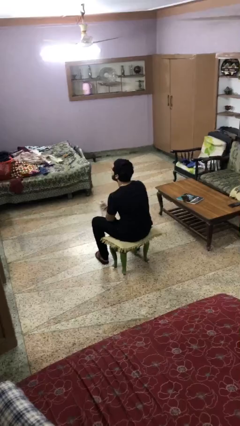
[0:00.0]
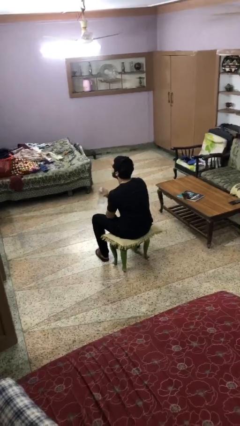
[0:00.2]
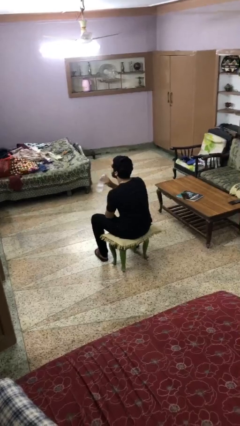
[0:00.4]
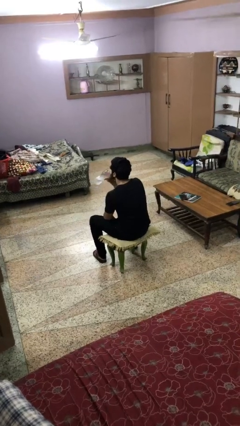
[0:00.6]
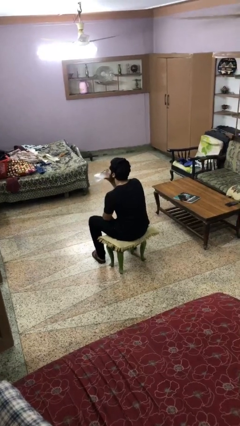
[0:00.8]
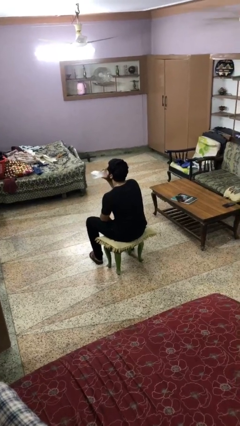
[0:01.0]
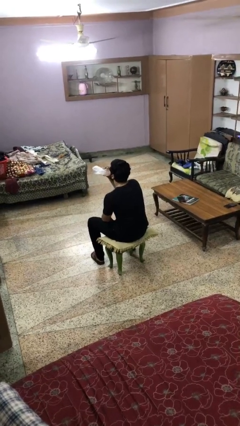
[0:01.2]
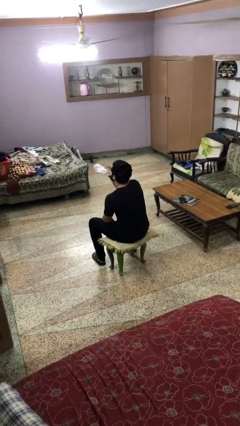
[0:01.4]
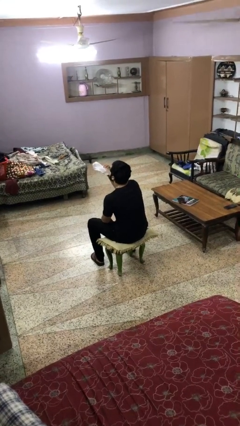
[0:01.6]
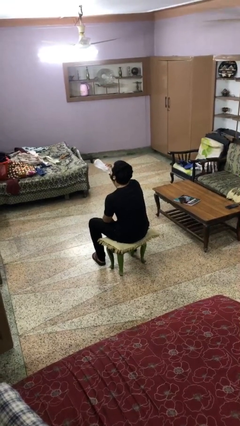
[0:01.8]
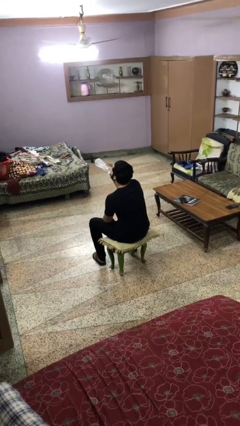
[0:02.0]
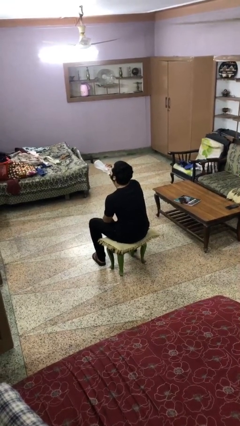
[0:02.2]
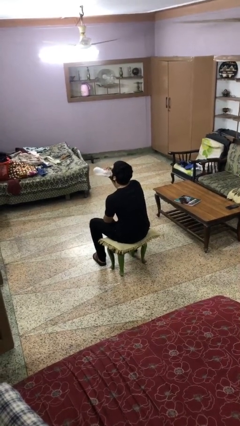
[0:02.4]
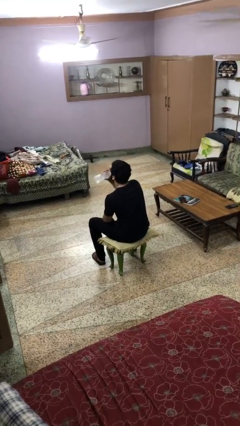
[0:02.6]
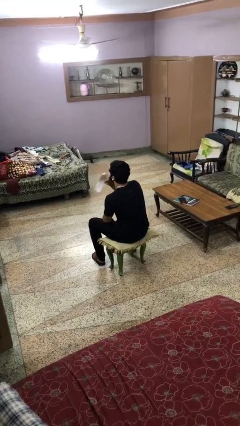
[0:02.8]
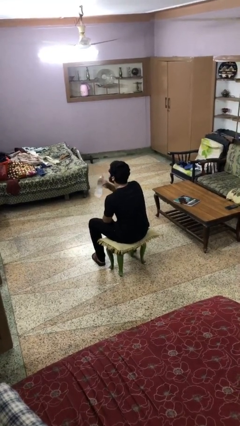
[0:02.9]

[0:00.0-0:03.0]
person drinks from bottle

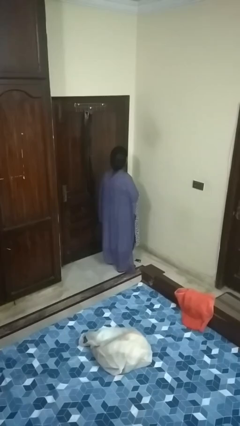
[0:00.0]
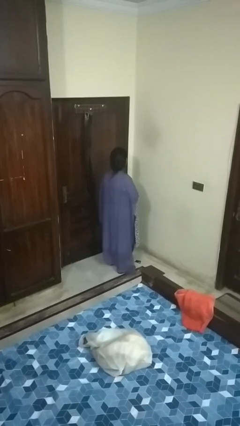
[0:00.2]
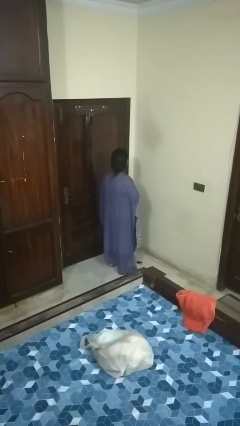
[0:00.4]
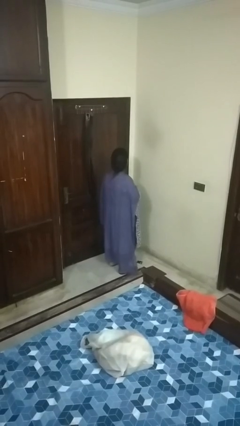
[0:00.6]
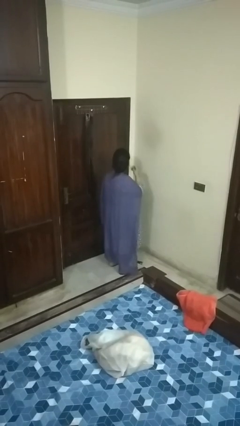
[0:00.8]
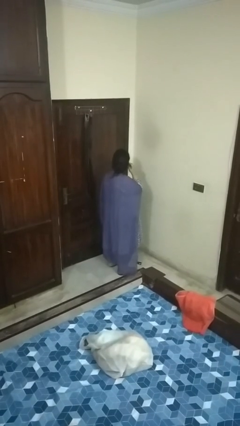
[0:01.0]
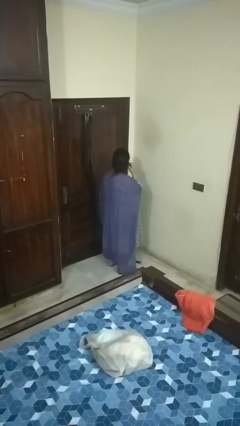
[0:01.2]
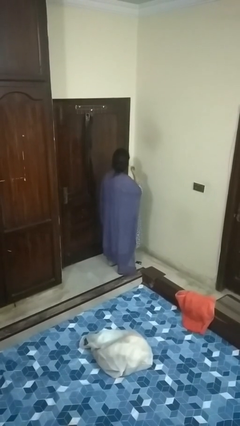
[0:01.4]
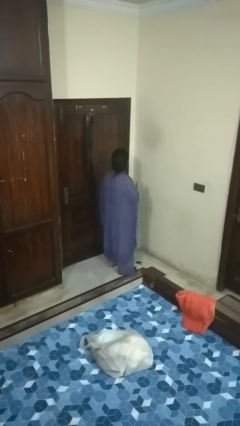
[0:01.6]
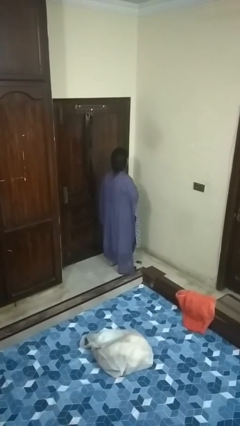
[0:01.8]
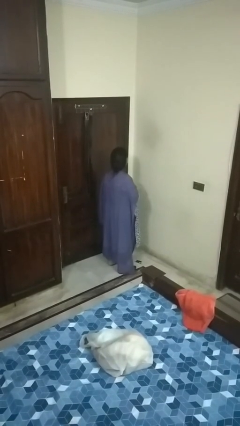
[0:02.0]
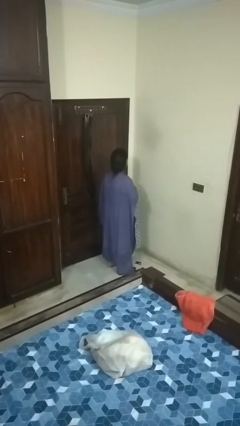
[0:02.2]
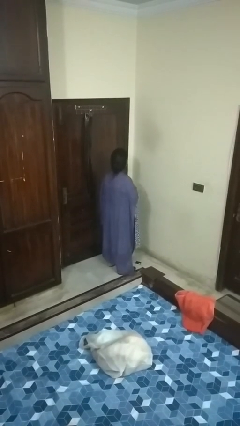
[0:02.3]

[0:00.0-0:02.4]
person takes off earrings

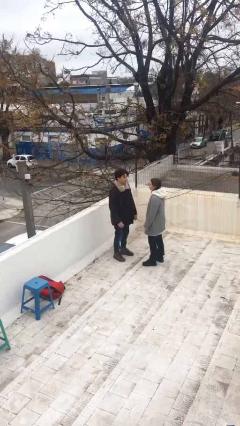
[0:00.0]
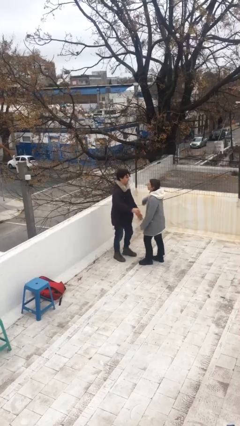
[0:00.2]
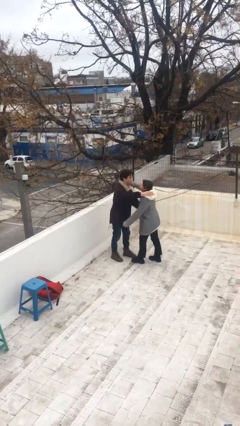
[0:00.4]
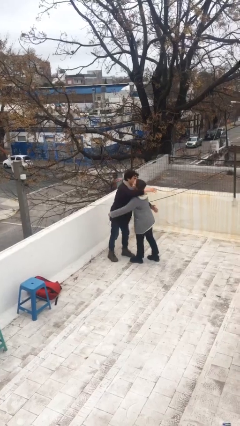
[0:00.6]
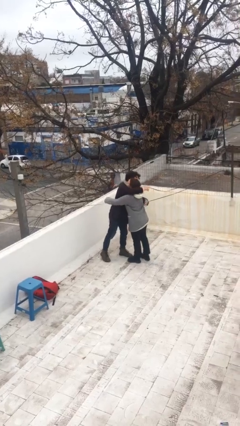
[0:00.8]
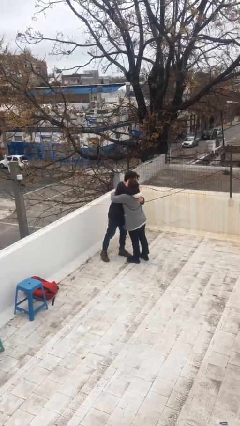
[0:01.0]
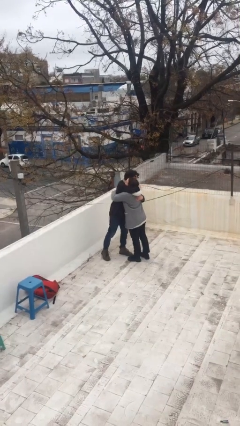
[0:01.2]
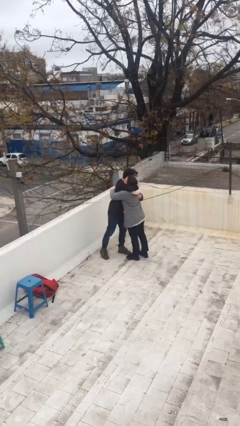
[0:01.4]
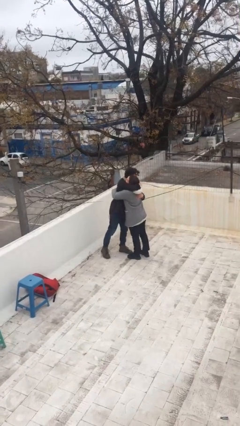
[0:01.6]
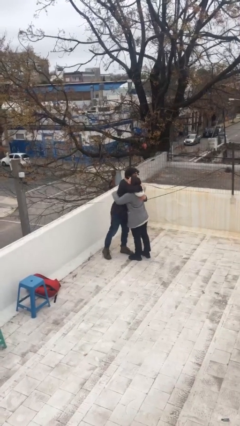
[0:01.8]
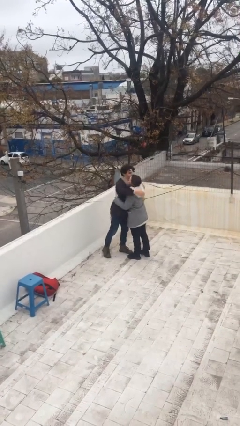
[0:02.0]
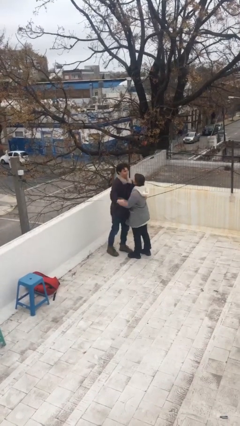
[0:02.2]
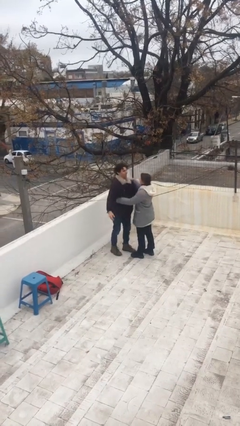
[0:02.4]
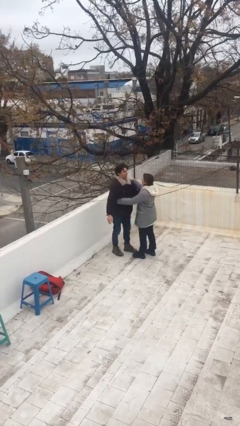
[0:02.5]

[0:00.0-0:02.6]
person embraces person

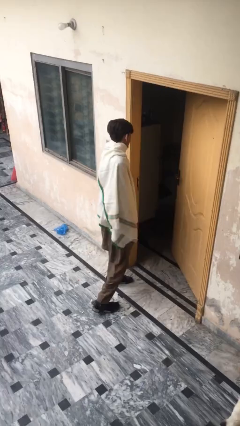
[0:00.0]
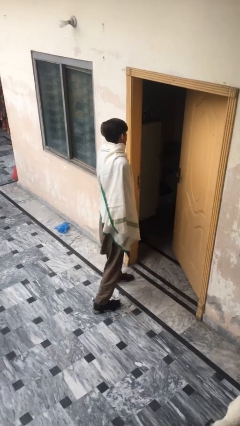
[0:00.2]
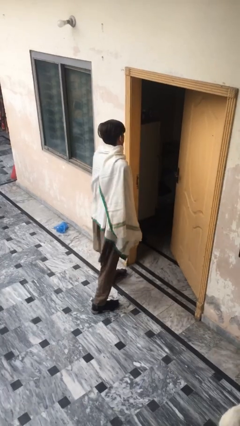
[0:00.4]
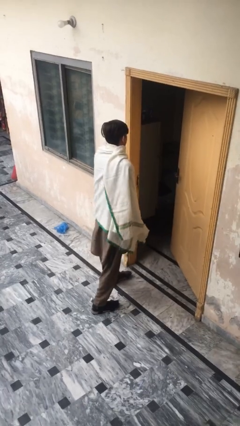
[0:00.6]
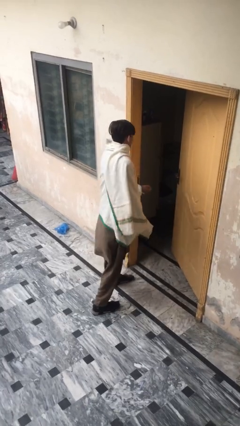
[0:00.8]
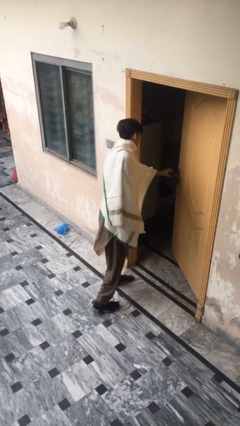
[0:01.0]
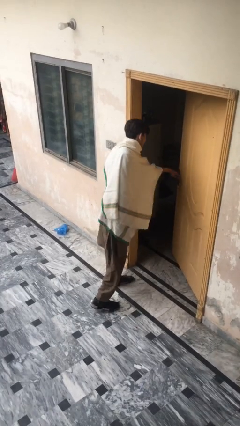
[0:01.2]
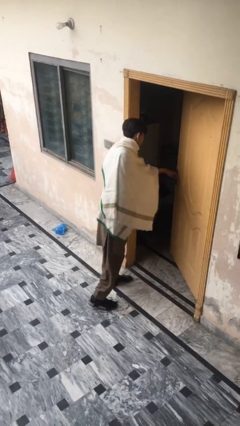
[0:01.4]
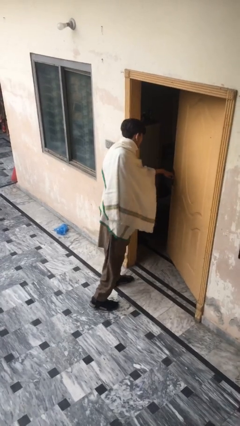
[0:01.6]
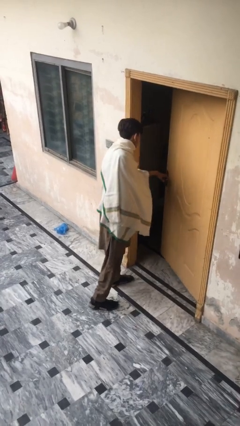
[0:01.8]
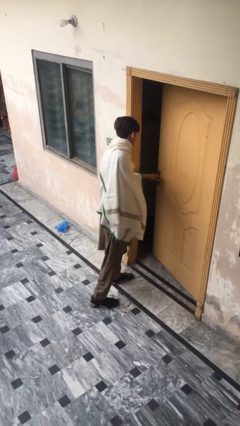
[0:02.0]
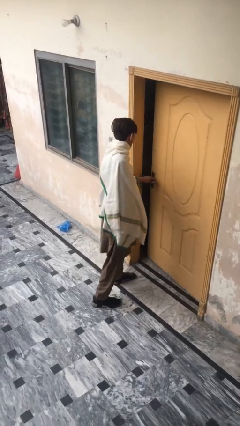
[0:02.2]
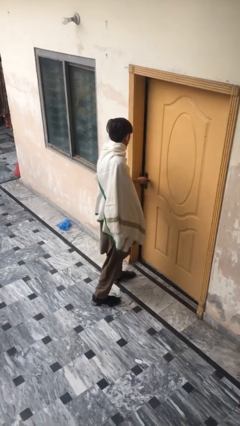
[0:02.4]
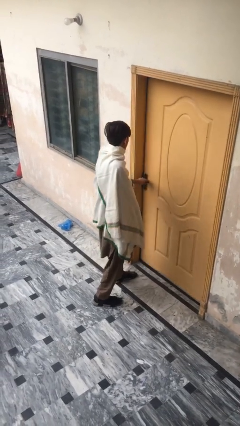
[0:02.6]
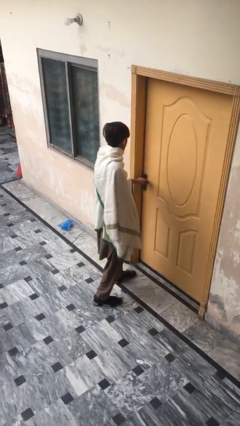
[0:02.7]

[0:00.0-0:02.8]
person closes facility door

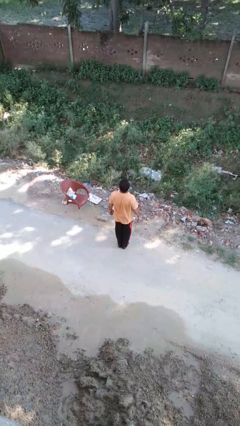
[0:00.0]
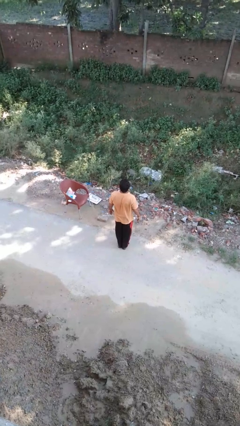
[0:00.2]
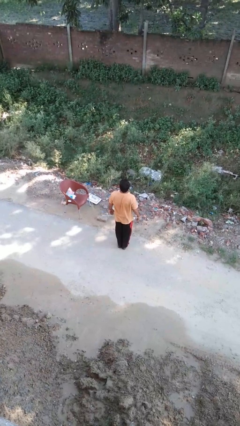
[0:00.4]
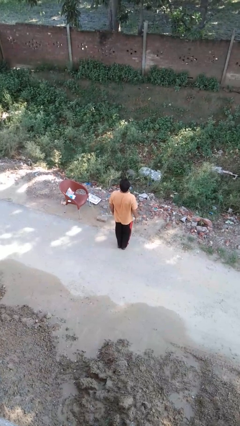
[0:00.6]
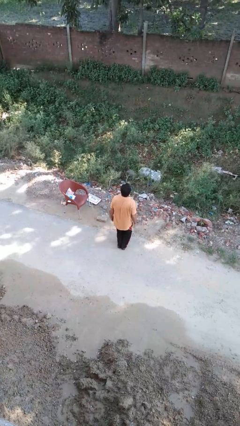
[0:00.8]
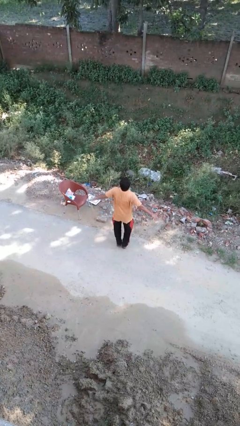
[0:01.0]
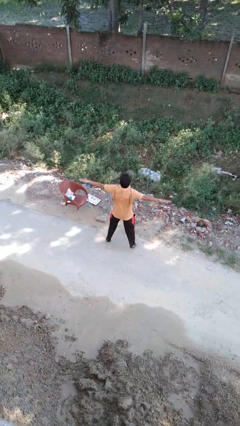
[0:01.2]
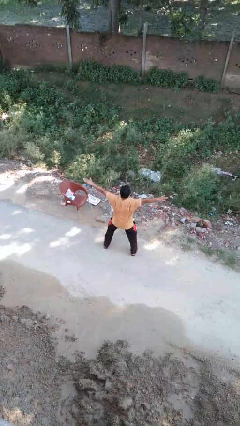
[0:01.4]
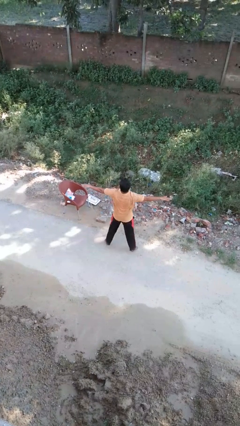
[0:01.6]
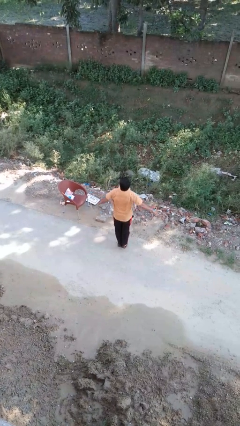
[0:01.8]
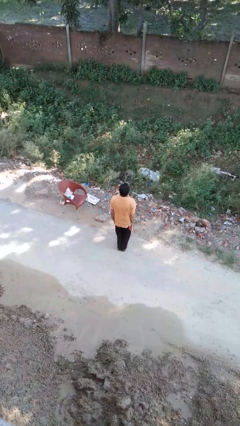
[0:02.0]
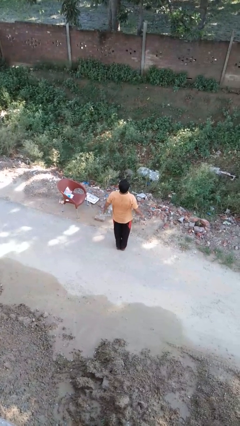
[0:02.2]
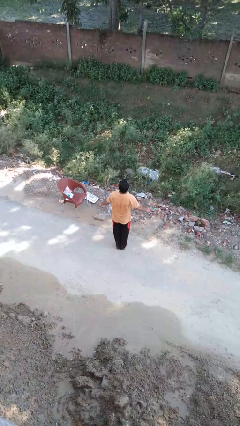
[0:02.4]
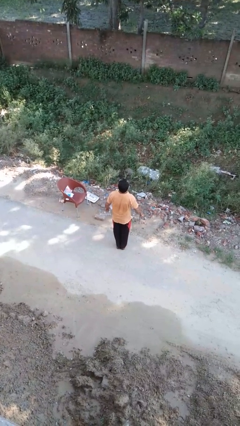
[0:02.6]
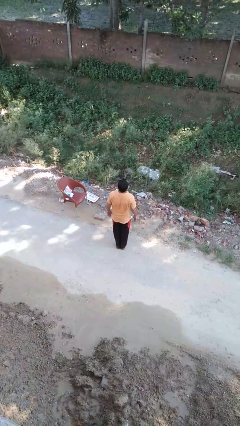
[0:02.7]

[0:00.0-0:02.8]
person exercises with jumping jacks

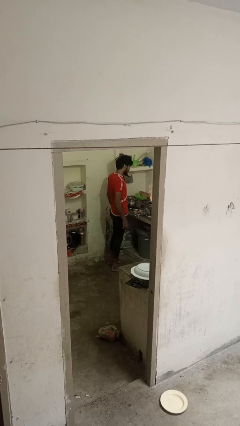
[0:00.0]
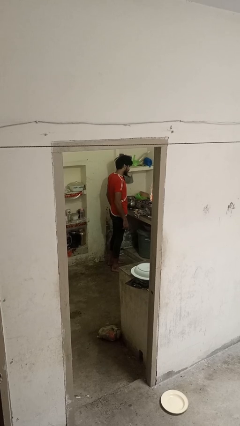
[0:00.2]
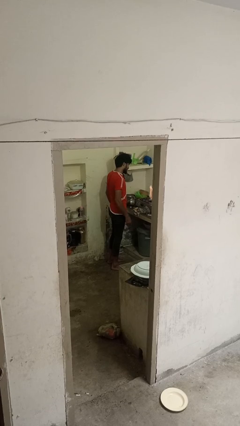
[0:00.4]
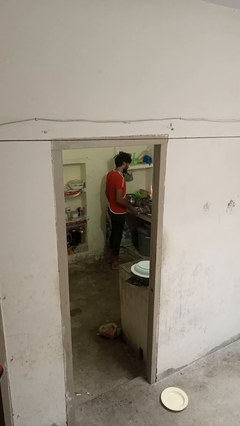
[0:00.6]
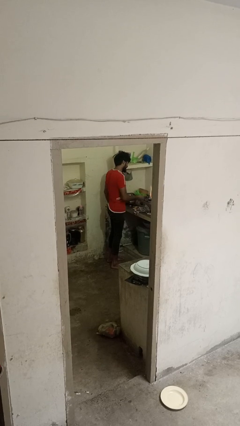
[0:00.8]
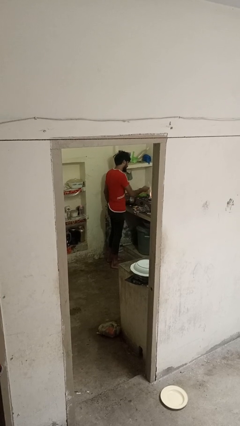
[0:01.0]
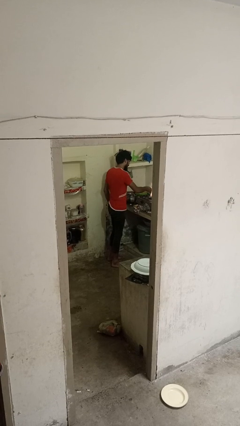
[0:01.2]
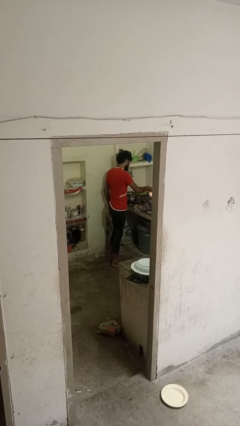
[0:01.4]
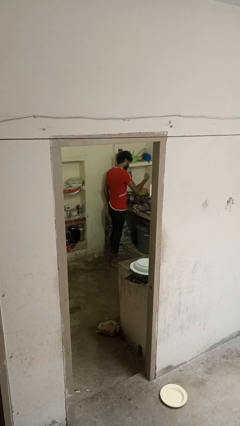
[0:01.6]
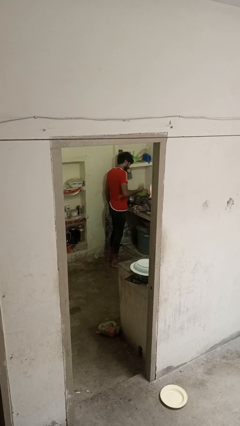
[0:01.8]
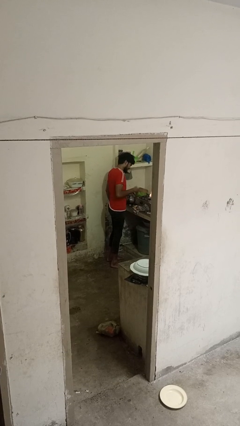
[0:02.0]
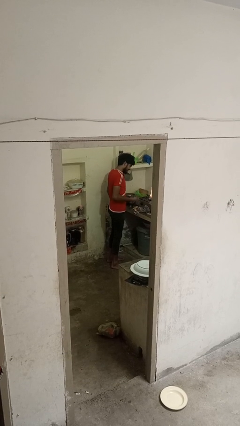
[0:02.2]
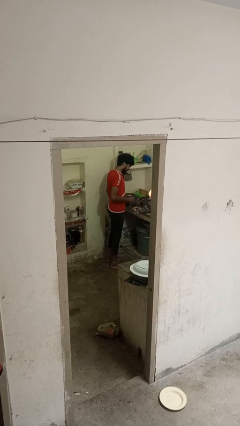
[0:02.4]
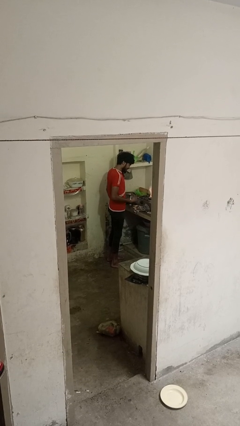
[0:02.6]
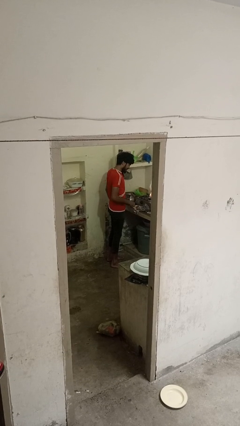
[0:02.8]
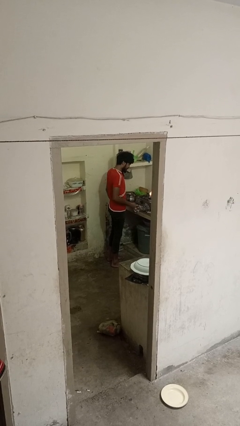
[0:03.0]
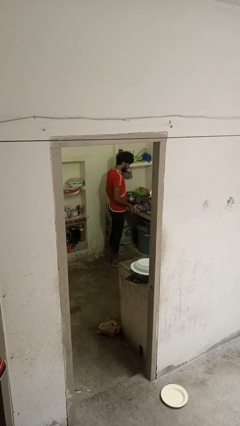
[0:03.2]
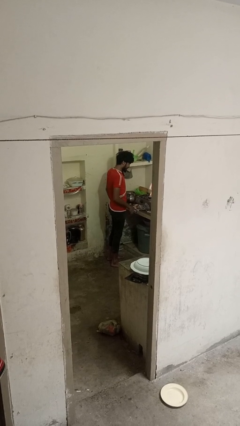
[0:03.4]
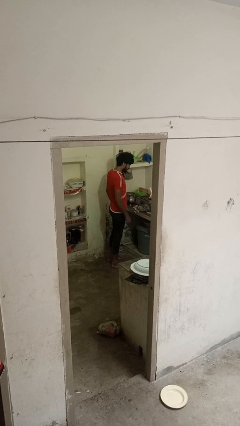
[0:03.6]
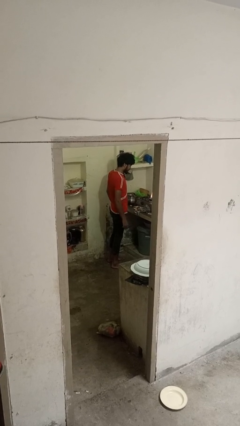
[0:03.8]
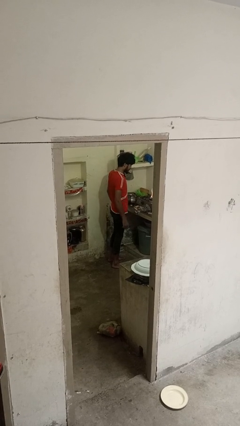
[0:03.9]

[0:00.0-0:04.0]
person burns hand
